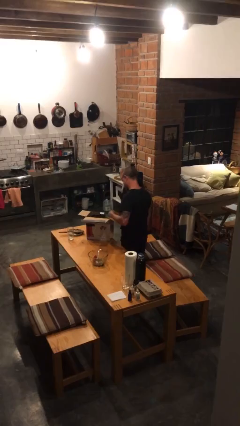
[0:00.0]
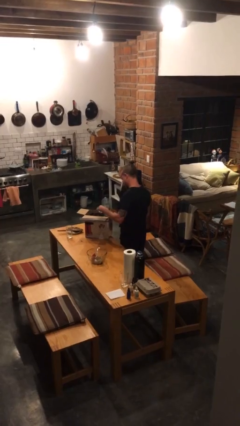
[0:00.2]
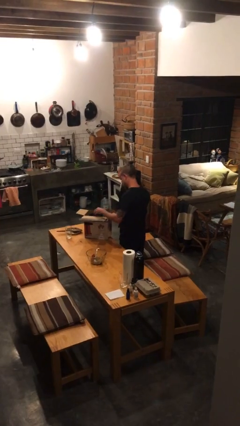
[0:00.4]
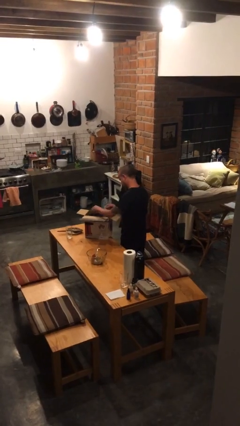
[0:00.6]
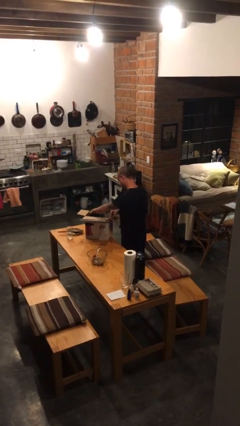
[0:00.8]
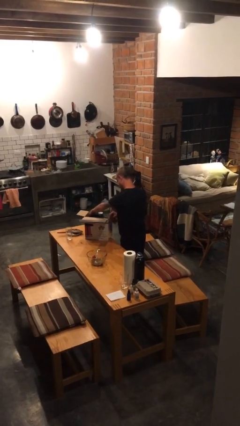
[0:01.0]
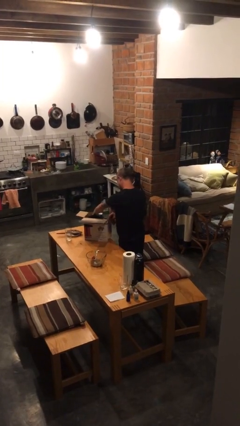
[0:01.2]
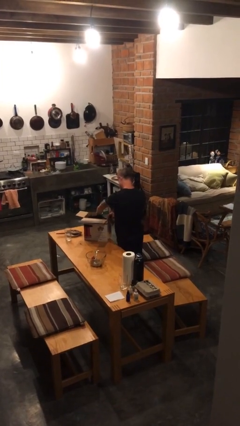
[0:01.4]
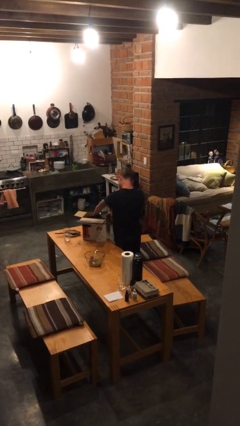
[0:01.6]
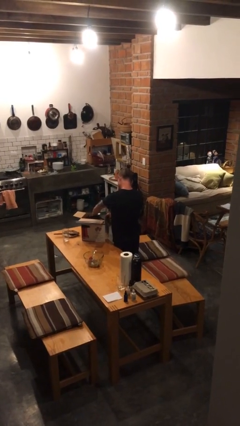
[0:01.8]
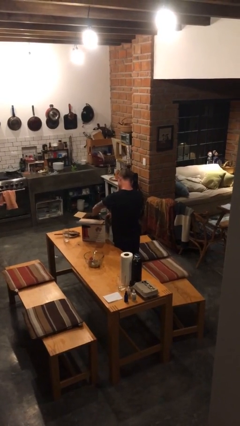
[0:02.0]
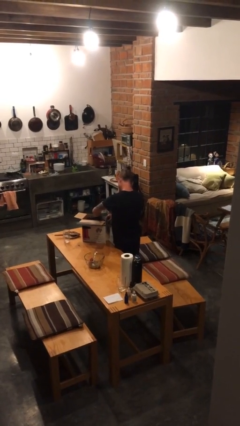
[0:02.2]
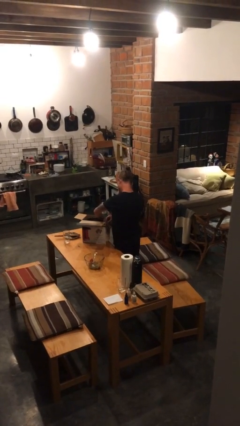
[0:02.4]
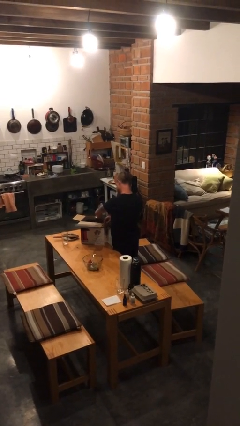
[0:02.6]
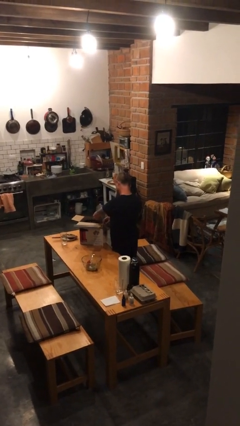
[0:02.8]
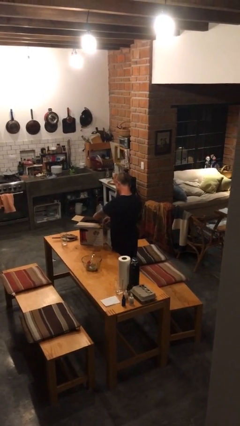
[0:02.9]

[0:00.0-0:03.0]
person searches in box

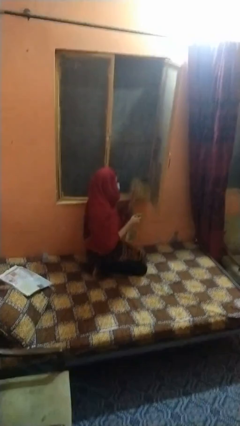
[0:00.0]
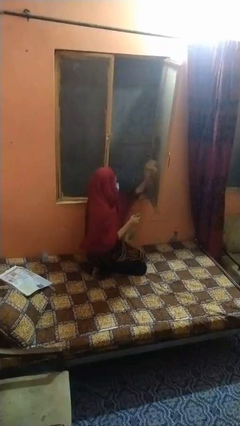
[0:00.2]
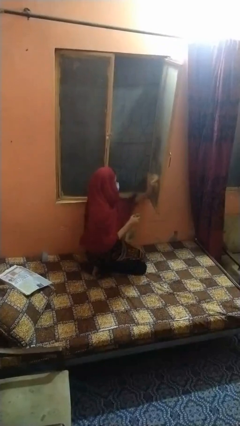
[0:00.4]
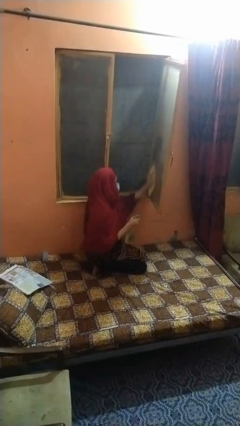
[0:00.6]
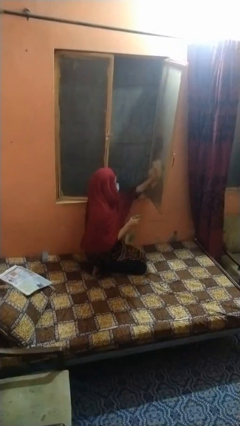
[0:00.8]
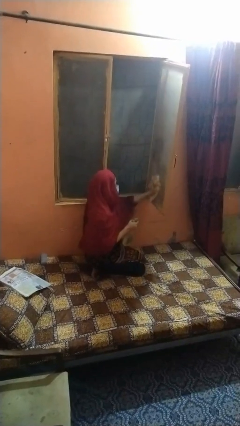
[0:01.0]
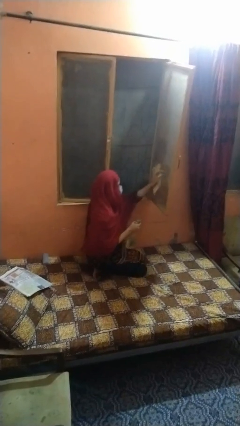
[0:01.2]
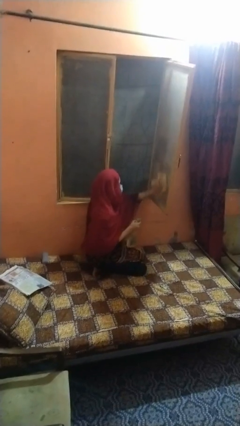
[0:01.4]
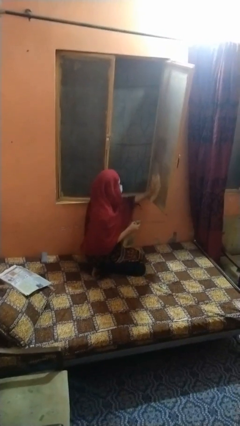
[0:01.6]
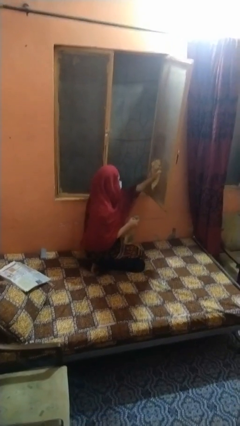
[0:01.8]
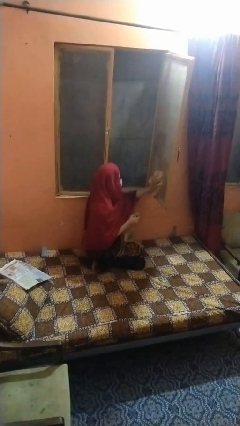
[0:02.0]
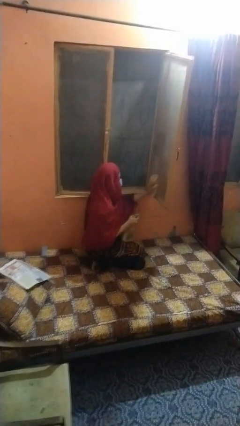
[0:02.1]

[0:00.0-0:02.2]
person washes window

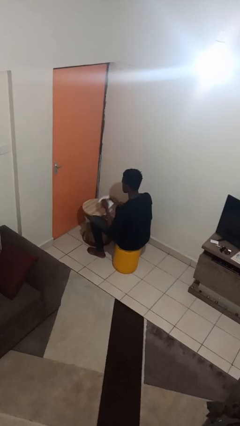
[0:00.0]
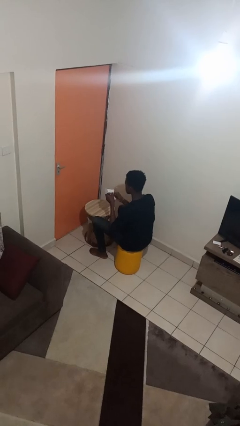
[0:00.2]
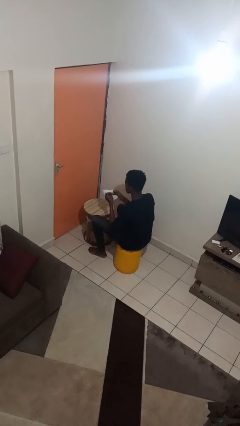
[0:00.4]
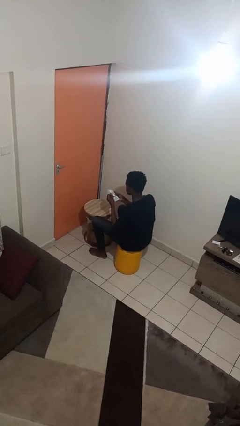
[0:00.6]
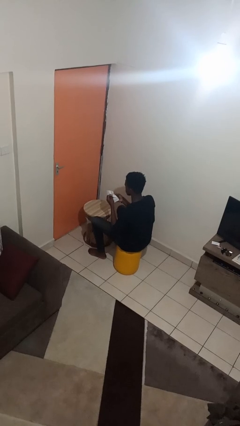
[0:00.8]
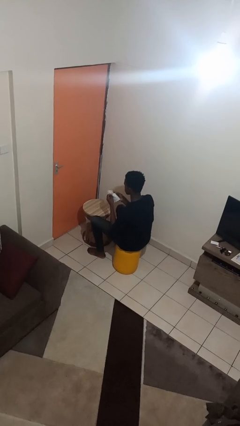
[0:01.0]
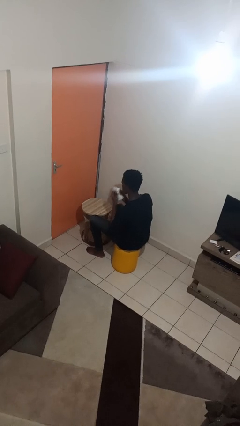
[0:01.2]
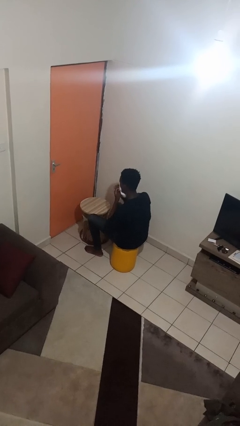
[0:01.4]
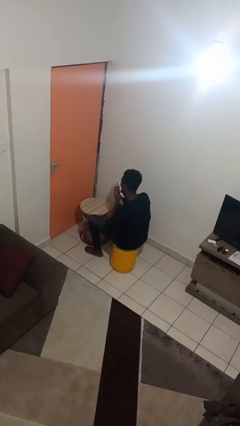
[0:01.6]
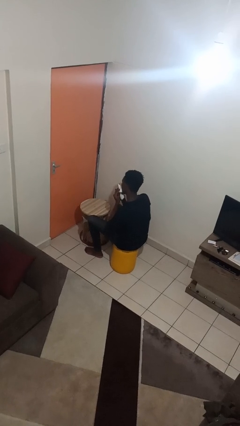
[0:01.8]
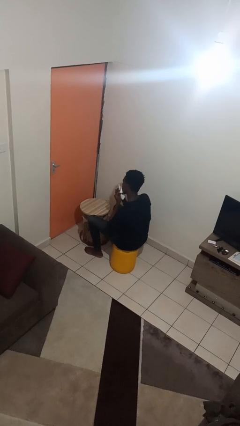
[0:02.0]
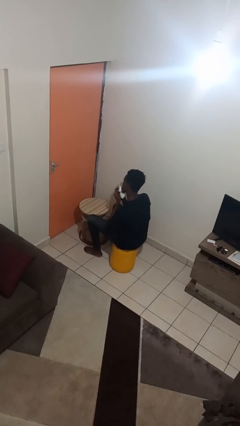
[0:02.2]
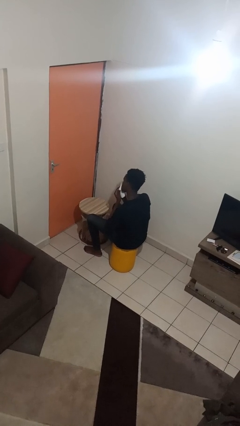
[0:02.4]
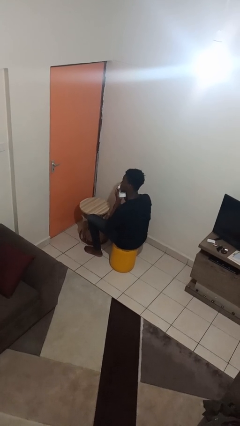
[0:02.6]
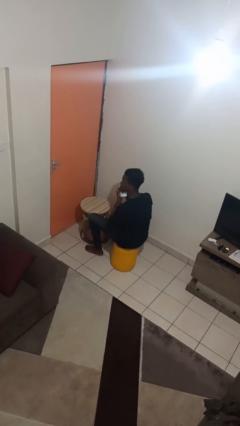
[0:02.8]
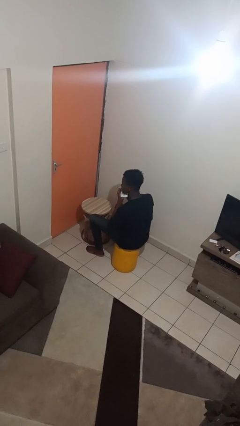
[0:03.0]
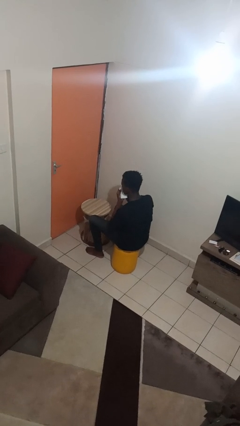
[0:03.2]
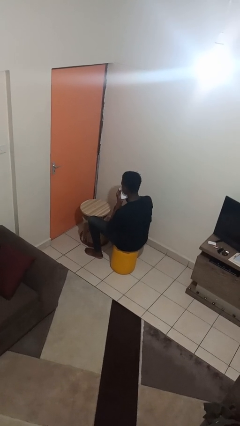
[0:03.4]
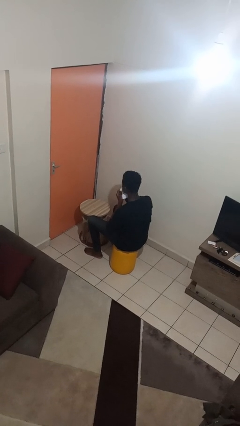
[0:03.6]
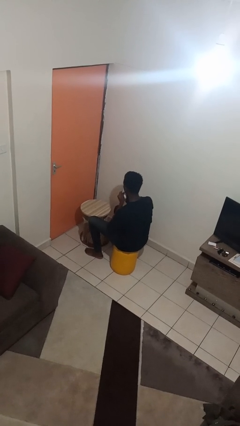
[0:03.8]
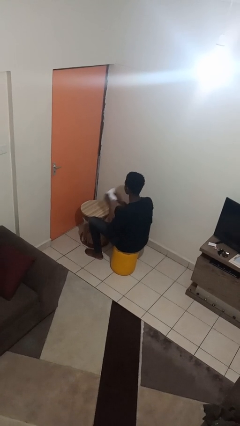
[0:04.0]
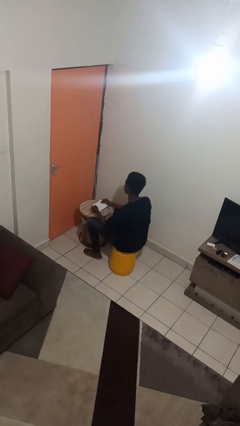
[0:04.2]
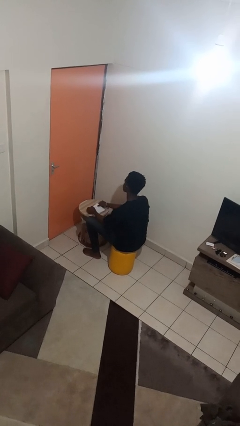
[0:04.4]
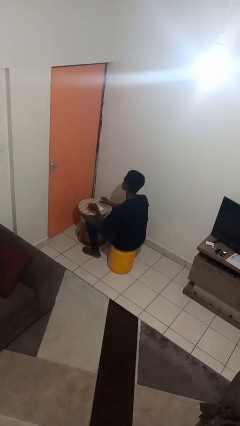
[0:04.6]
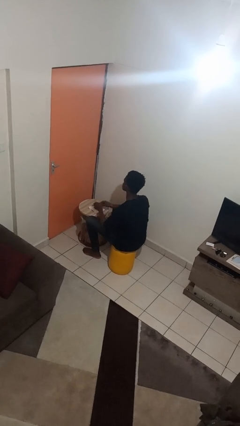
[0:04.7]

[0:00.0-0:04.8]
person wipes mouth with napkin

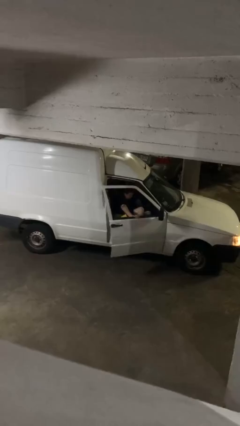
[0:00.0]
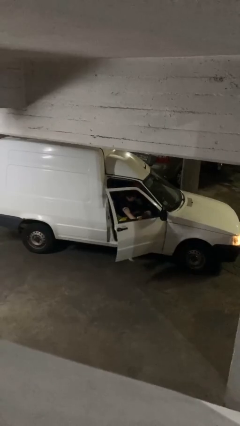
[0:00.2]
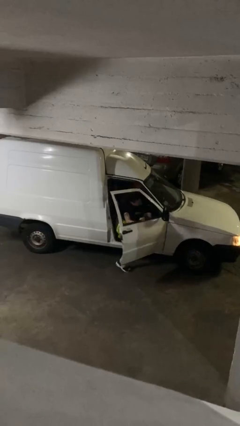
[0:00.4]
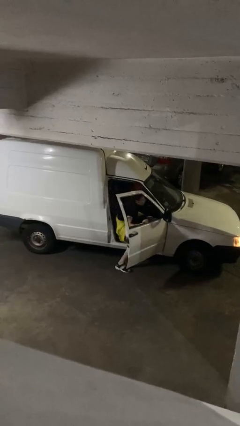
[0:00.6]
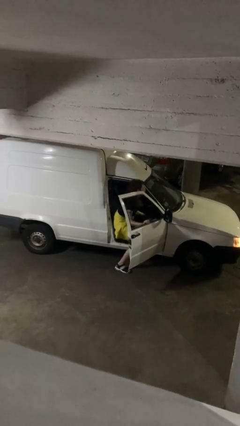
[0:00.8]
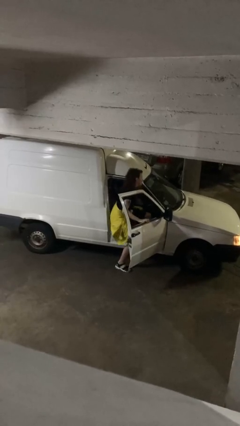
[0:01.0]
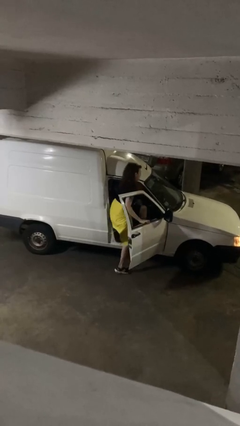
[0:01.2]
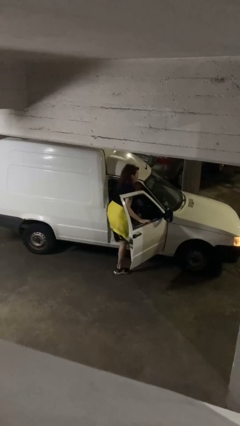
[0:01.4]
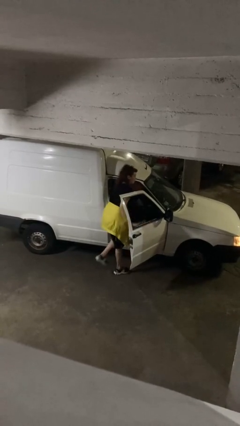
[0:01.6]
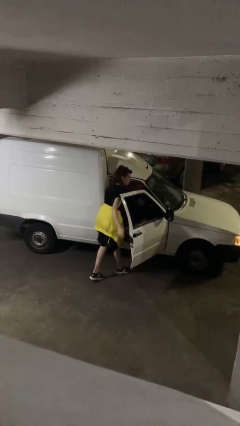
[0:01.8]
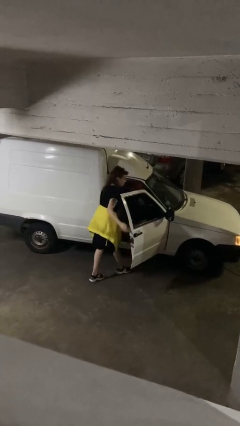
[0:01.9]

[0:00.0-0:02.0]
car drops off person

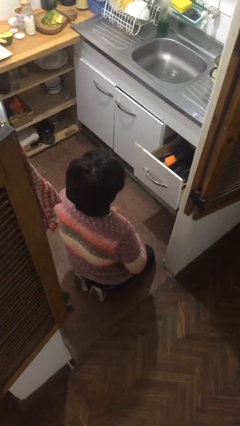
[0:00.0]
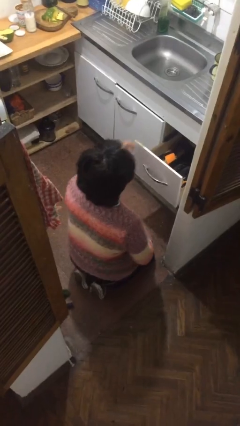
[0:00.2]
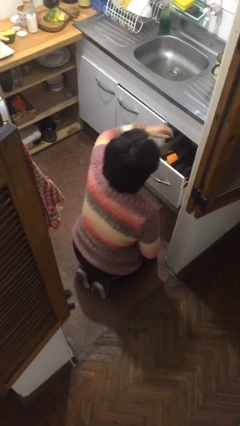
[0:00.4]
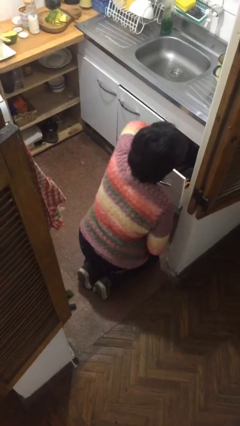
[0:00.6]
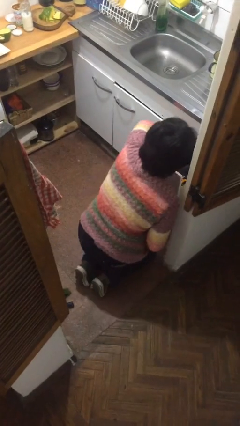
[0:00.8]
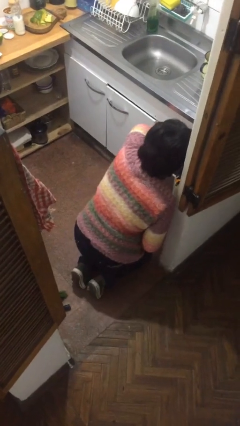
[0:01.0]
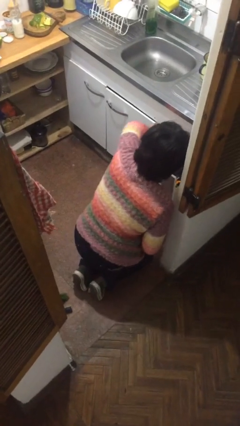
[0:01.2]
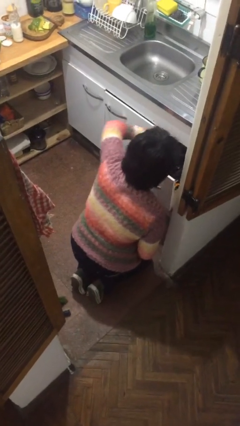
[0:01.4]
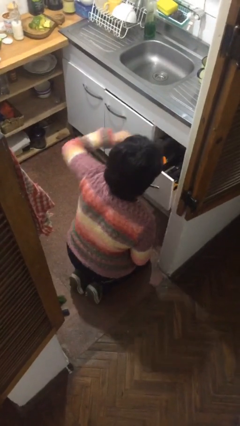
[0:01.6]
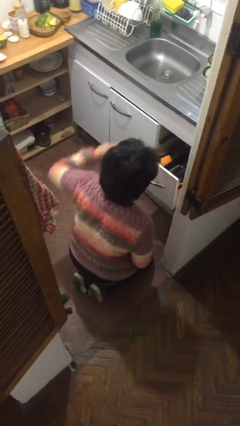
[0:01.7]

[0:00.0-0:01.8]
person takes object from kitchen drawer

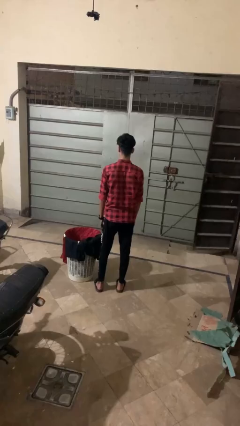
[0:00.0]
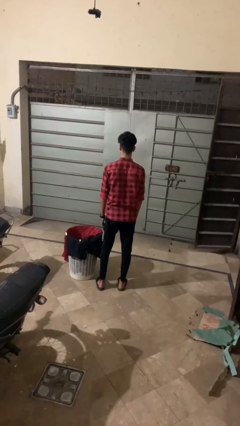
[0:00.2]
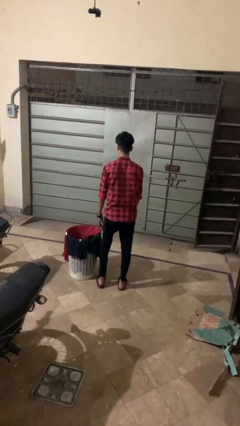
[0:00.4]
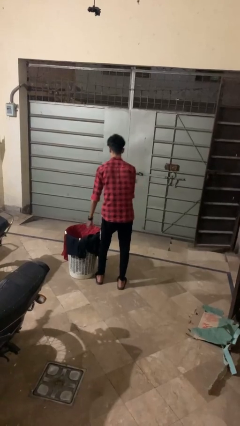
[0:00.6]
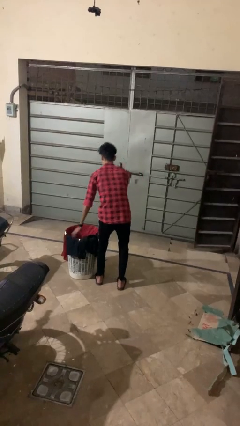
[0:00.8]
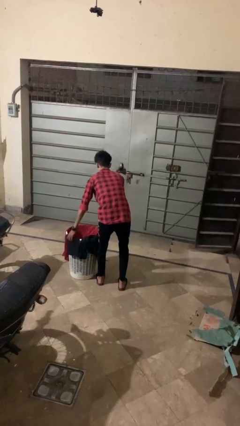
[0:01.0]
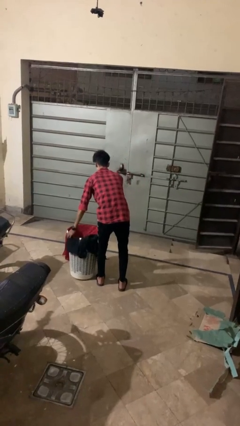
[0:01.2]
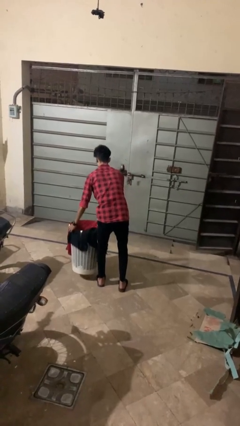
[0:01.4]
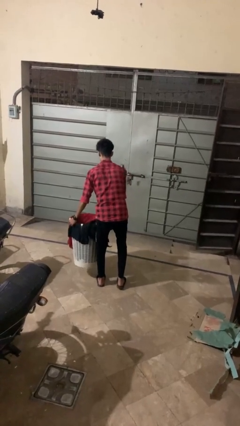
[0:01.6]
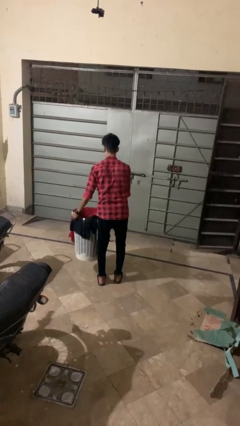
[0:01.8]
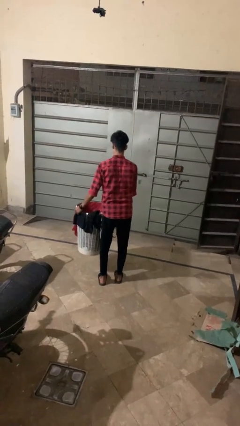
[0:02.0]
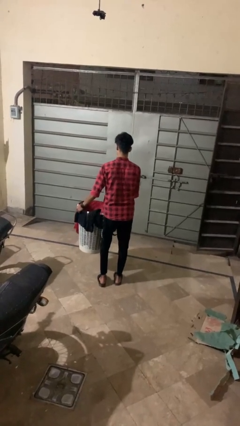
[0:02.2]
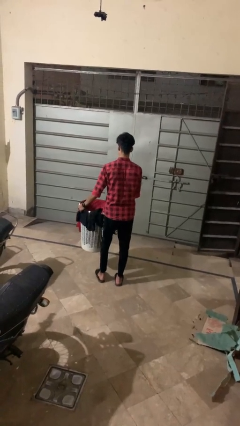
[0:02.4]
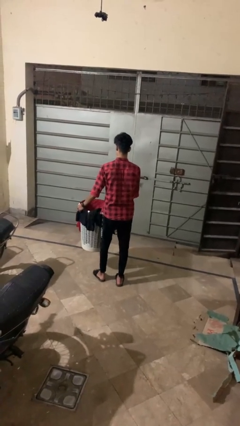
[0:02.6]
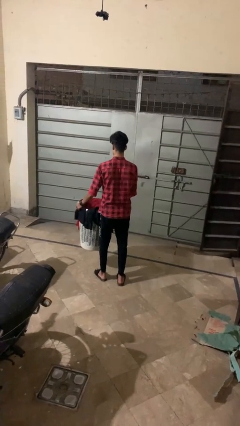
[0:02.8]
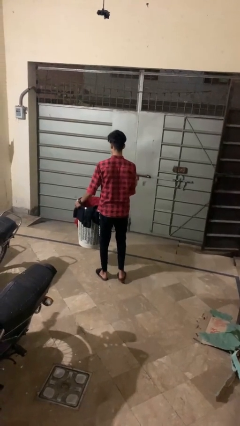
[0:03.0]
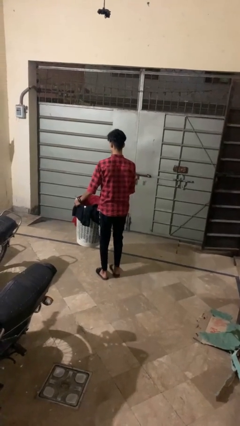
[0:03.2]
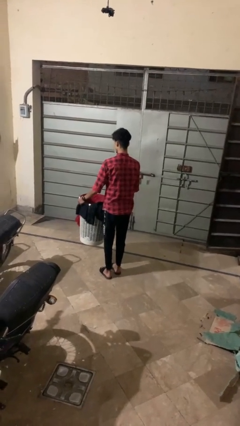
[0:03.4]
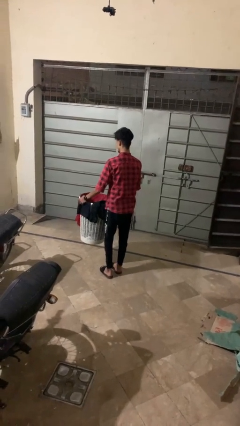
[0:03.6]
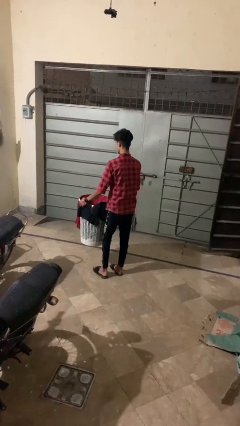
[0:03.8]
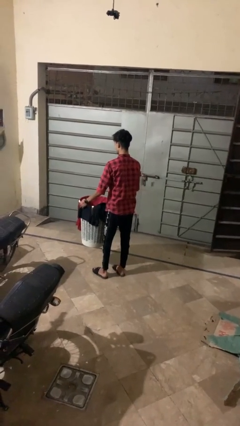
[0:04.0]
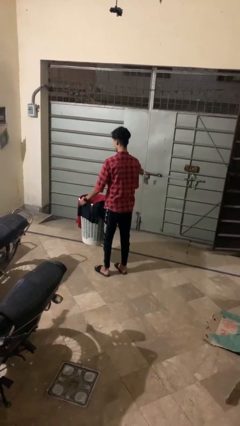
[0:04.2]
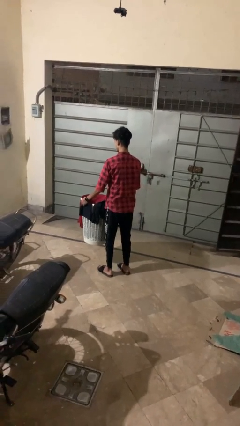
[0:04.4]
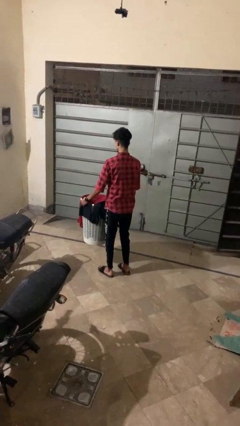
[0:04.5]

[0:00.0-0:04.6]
person carries laundry basket
